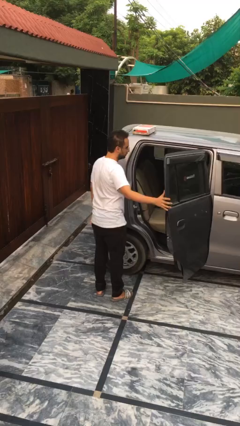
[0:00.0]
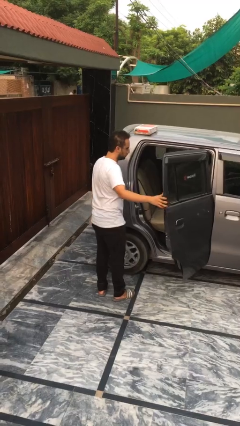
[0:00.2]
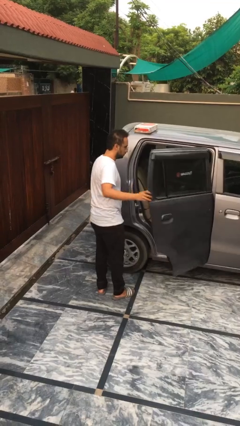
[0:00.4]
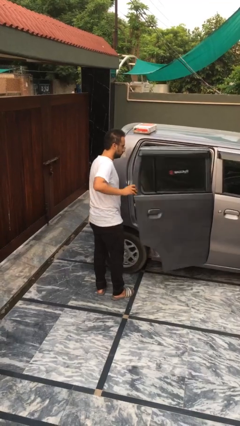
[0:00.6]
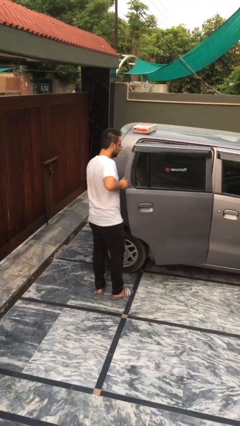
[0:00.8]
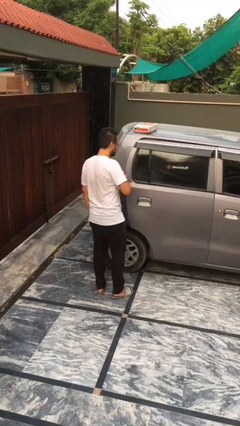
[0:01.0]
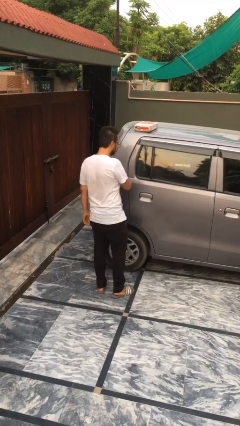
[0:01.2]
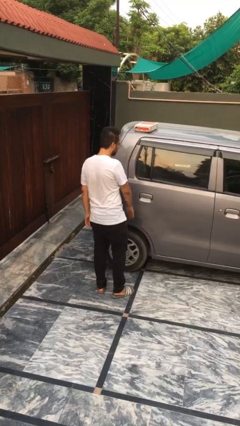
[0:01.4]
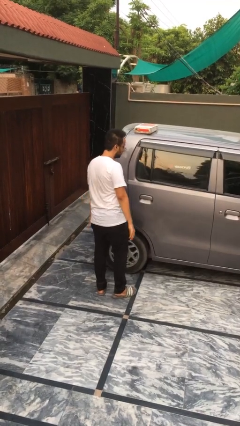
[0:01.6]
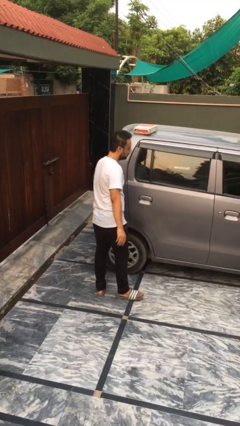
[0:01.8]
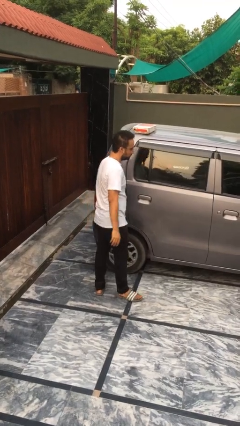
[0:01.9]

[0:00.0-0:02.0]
person closes car door

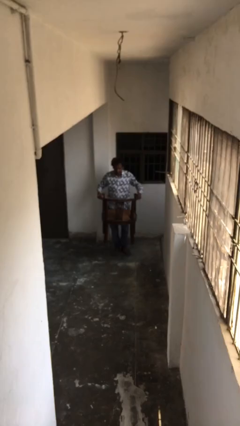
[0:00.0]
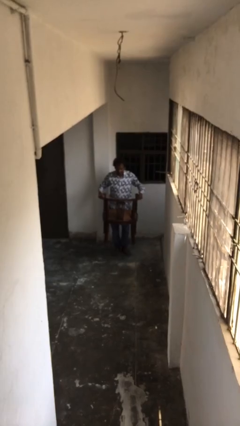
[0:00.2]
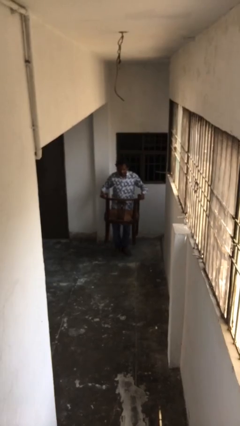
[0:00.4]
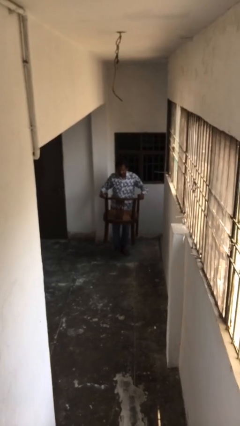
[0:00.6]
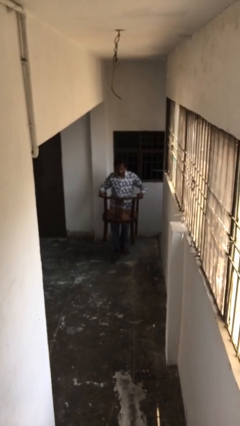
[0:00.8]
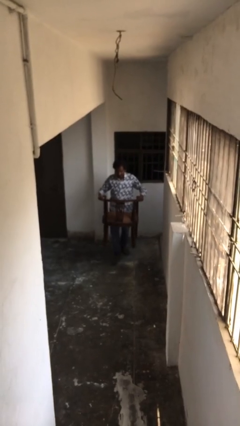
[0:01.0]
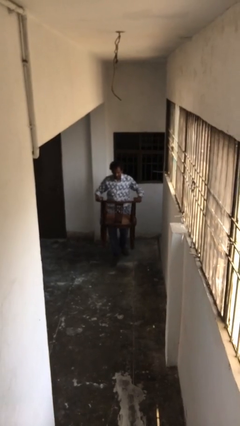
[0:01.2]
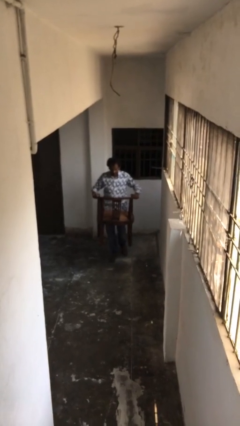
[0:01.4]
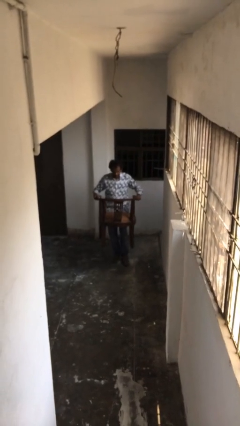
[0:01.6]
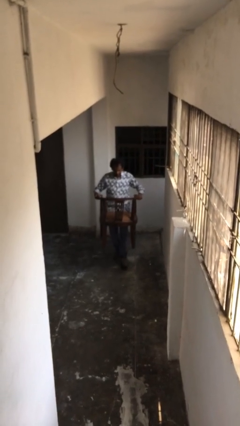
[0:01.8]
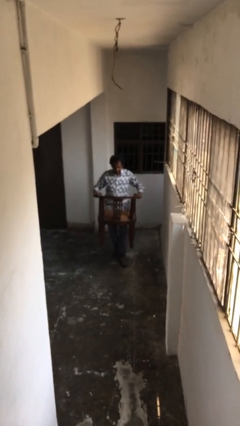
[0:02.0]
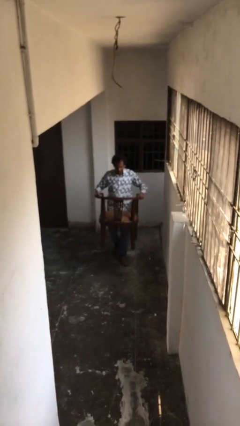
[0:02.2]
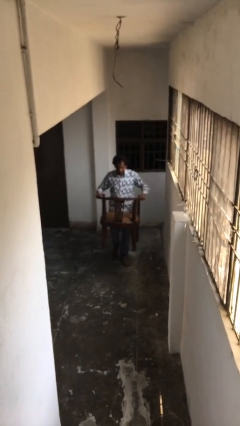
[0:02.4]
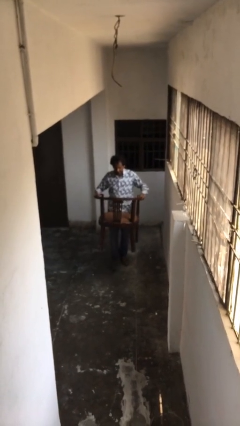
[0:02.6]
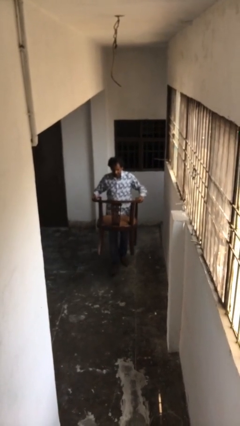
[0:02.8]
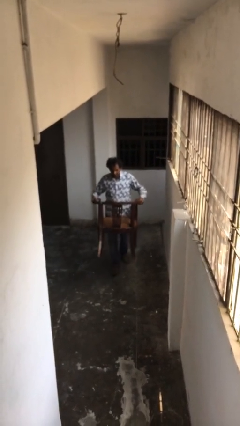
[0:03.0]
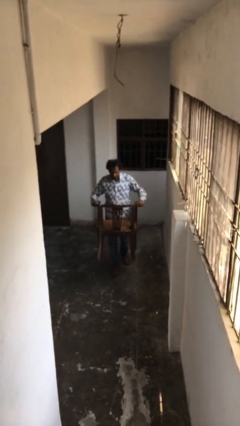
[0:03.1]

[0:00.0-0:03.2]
person carries heavy object

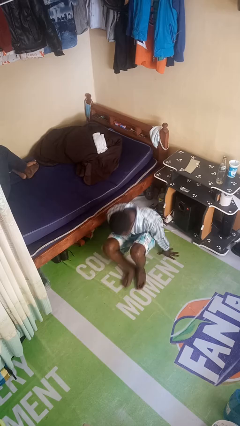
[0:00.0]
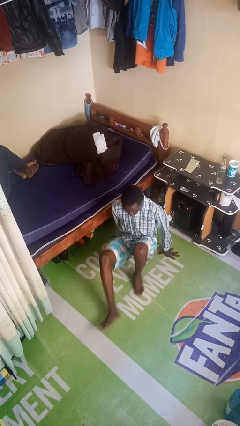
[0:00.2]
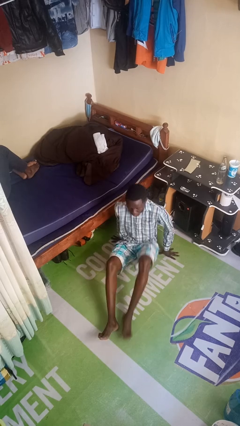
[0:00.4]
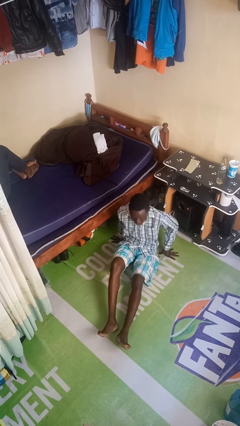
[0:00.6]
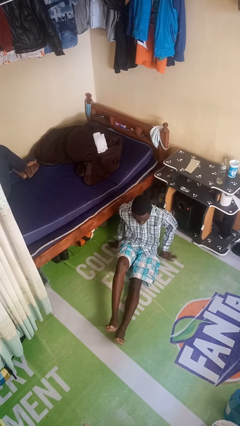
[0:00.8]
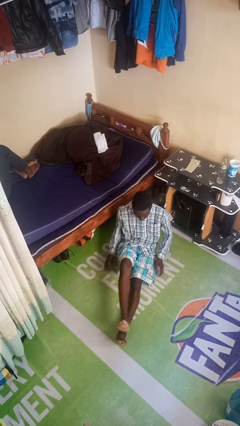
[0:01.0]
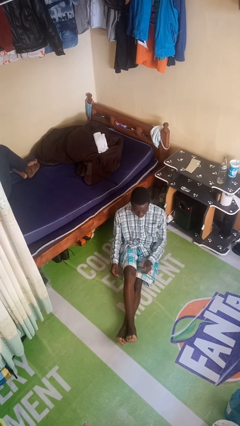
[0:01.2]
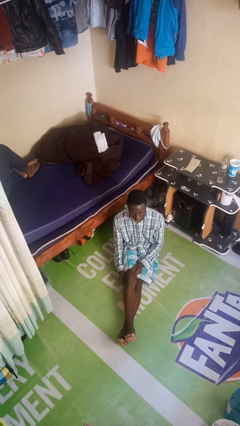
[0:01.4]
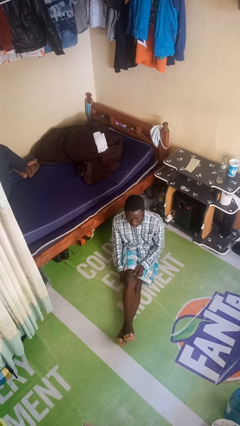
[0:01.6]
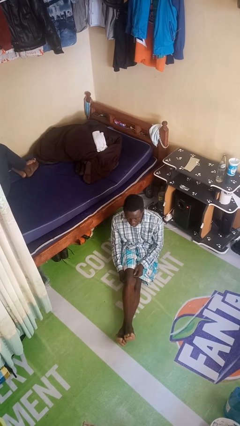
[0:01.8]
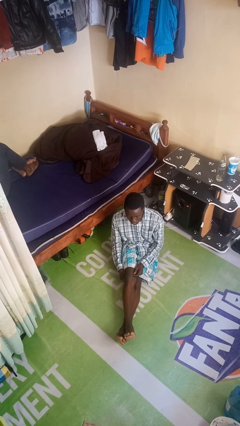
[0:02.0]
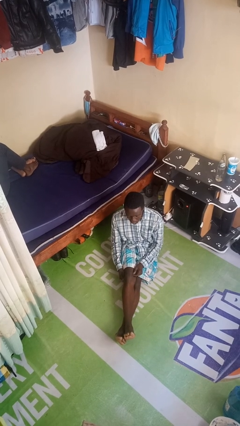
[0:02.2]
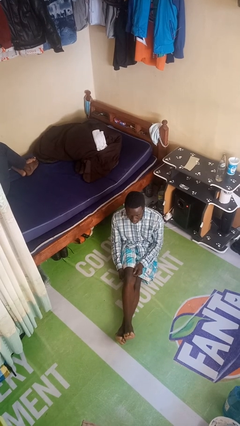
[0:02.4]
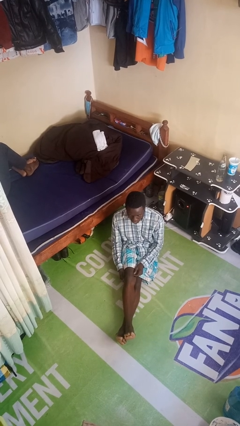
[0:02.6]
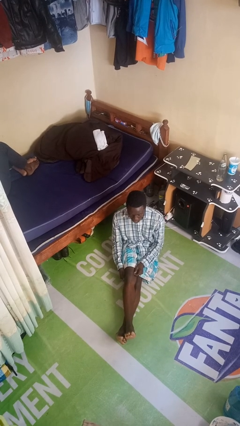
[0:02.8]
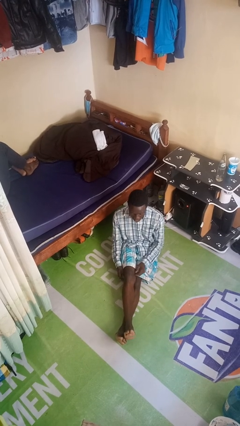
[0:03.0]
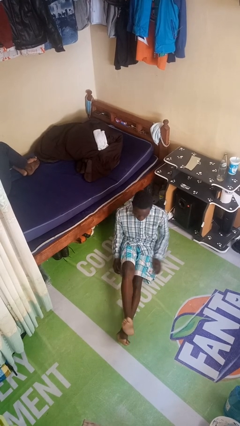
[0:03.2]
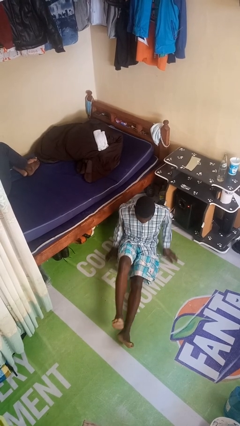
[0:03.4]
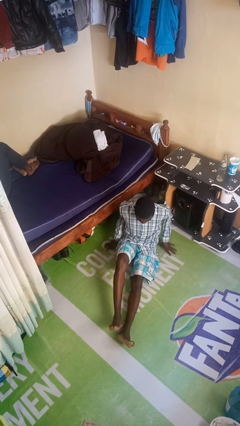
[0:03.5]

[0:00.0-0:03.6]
person sits crisscross

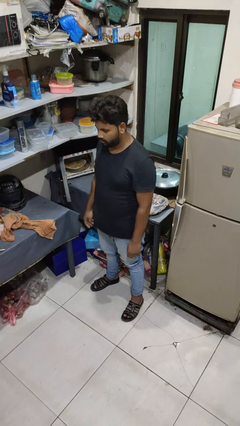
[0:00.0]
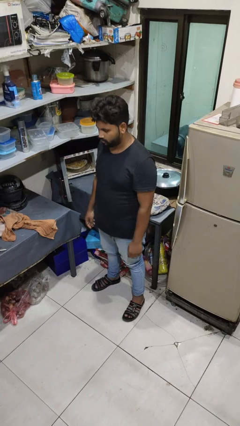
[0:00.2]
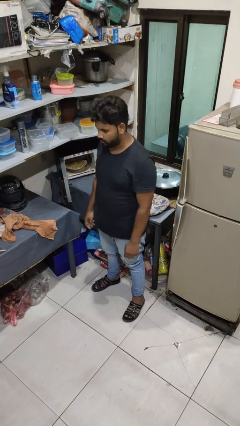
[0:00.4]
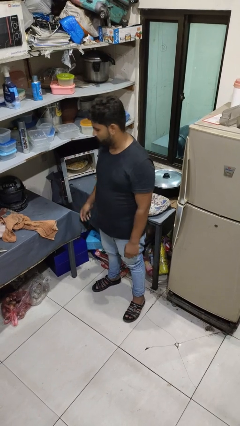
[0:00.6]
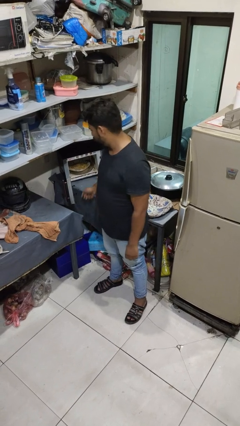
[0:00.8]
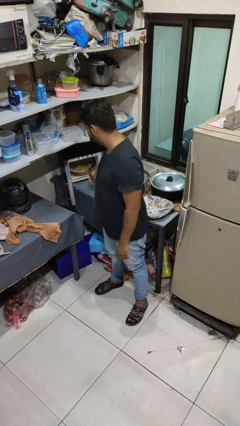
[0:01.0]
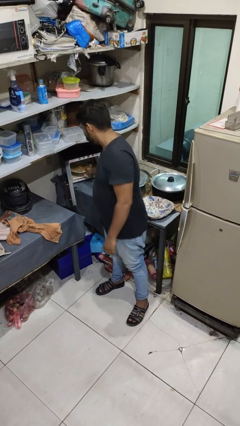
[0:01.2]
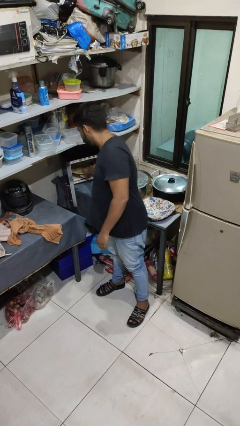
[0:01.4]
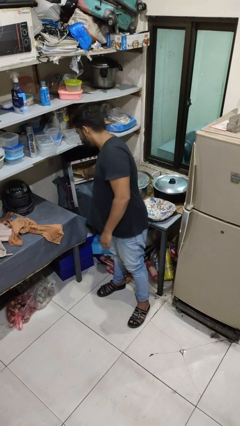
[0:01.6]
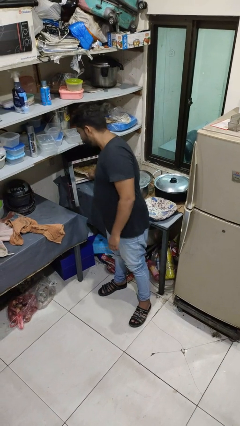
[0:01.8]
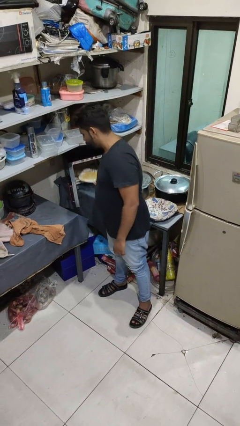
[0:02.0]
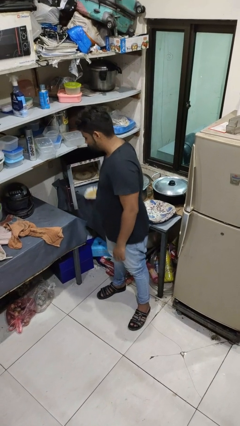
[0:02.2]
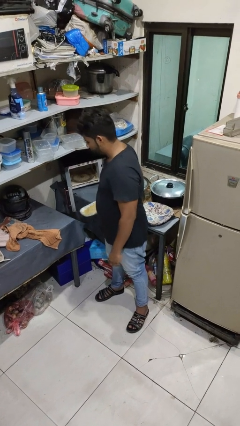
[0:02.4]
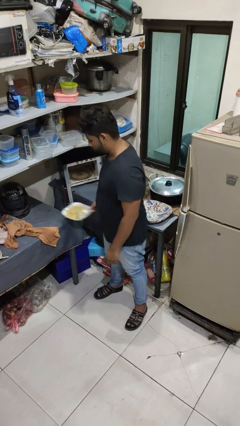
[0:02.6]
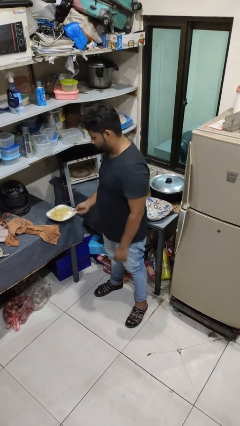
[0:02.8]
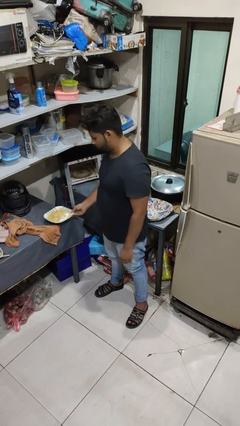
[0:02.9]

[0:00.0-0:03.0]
person takes object from microwave

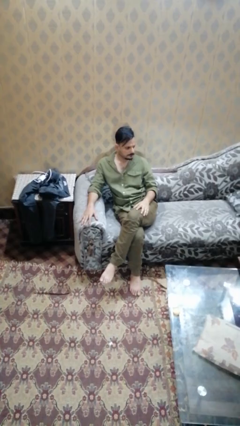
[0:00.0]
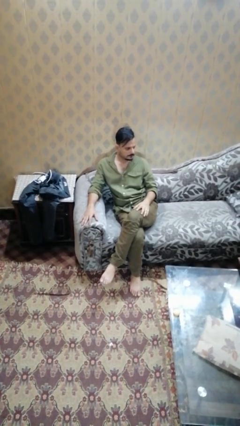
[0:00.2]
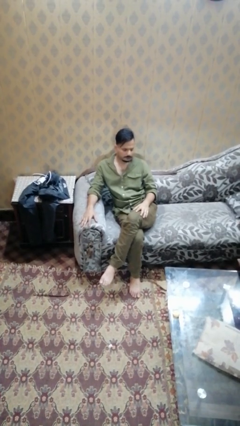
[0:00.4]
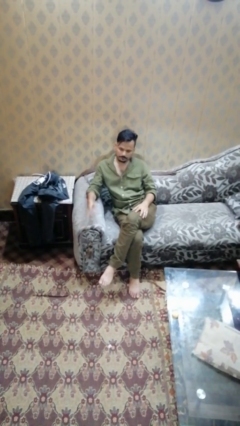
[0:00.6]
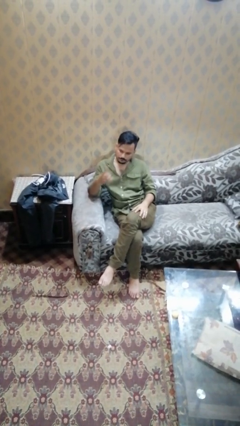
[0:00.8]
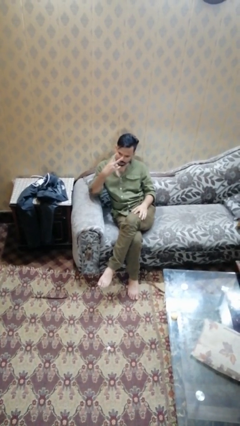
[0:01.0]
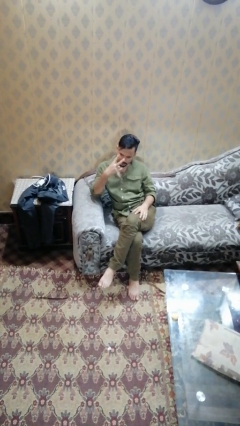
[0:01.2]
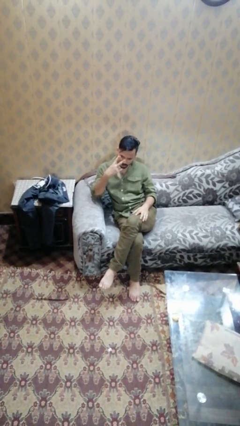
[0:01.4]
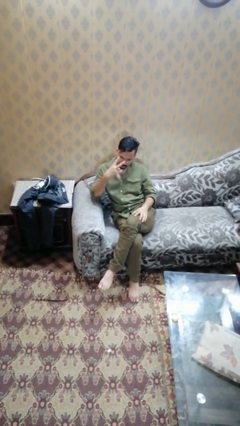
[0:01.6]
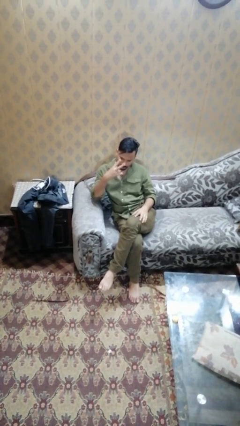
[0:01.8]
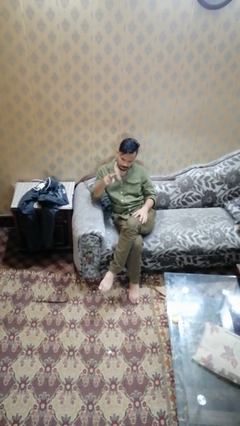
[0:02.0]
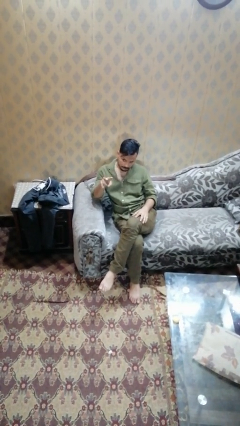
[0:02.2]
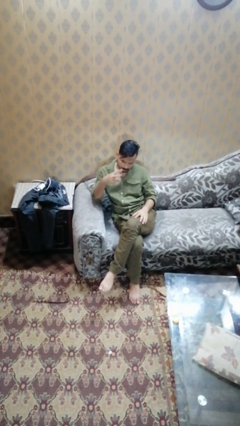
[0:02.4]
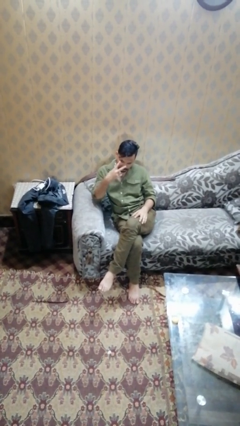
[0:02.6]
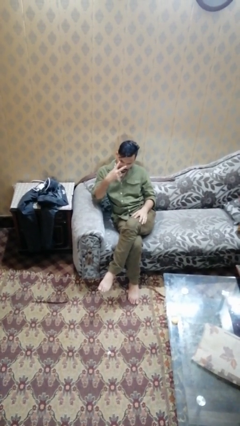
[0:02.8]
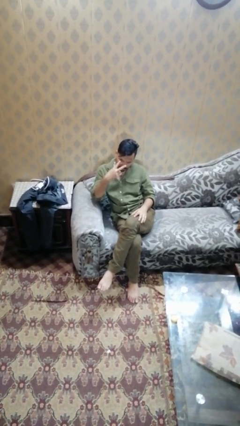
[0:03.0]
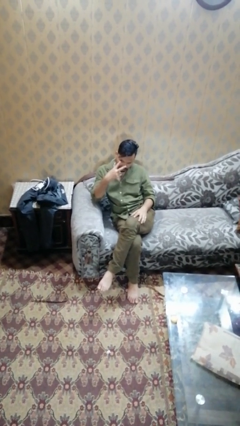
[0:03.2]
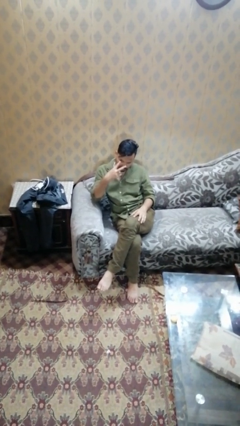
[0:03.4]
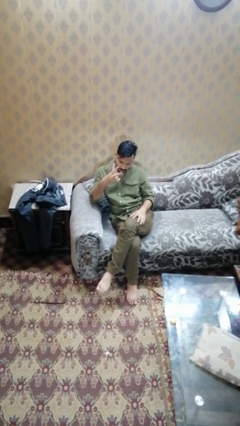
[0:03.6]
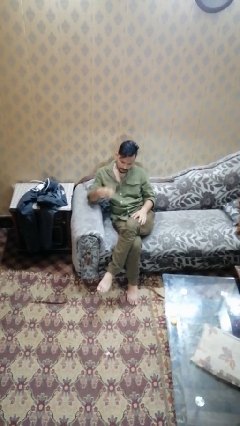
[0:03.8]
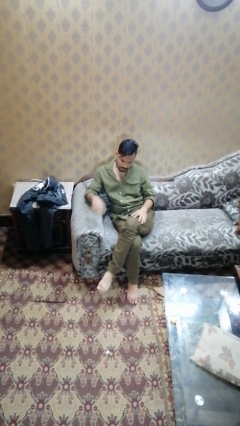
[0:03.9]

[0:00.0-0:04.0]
person gestures watch closely

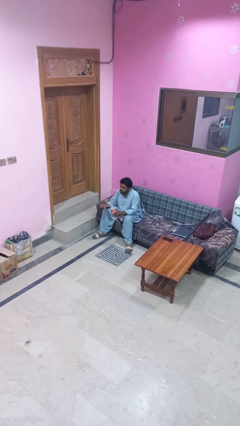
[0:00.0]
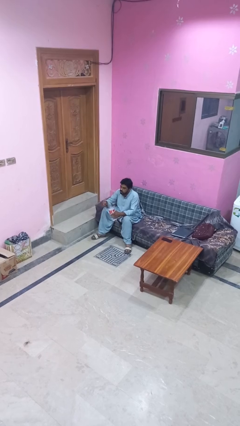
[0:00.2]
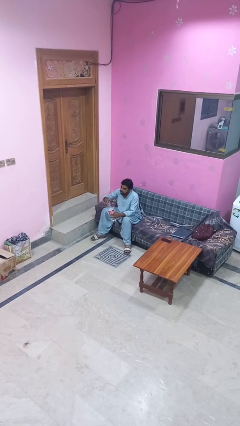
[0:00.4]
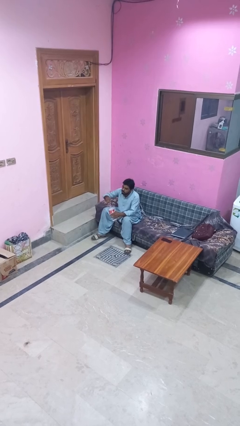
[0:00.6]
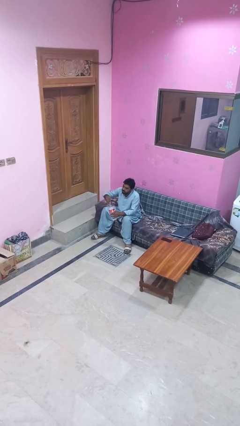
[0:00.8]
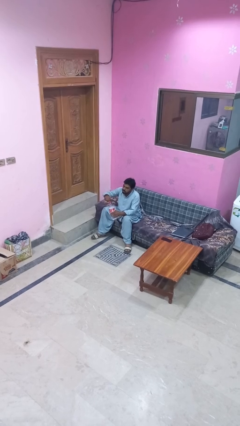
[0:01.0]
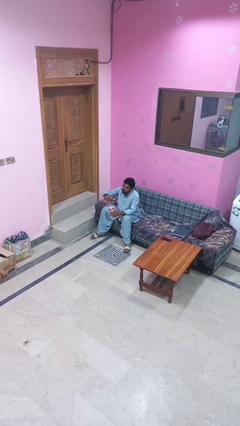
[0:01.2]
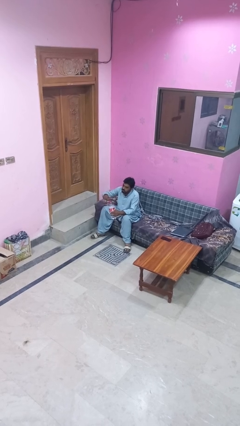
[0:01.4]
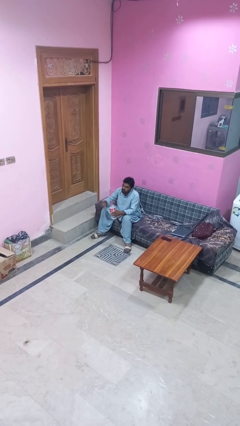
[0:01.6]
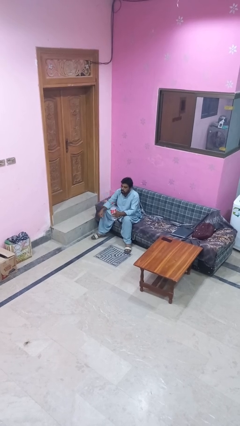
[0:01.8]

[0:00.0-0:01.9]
person screws lid to bottle

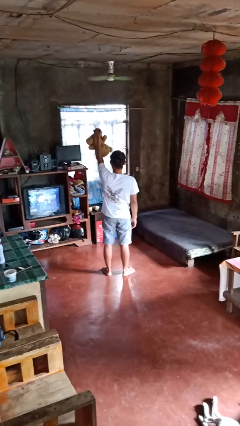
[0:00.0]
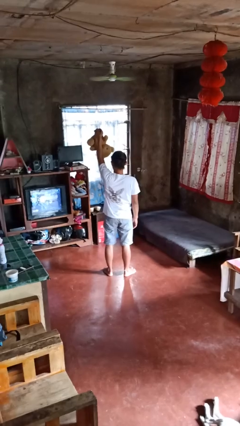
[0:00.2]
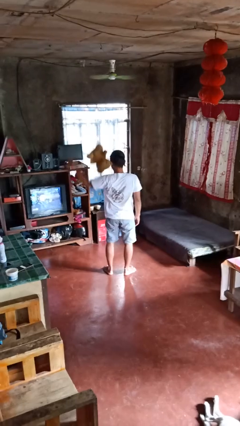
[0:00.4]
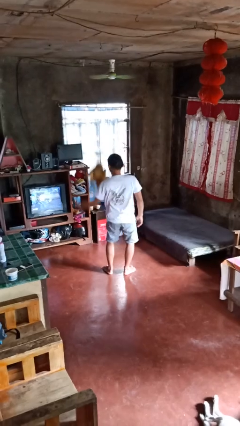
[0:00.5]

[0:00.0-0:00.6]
person drops object
